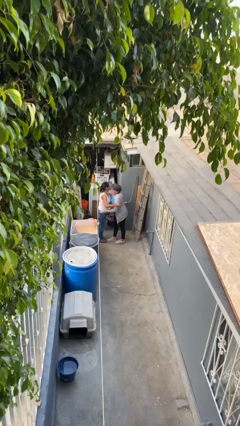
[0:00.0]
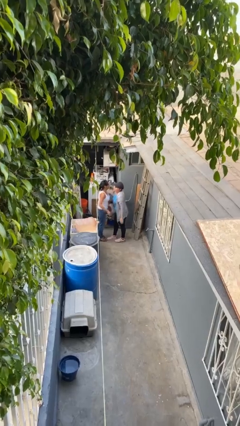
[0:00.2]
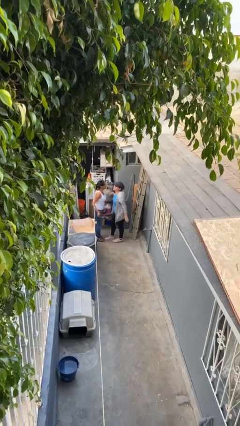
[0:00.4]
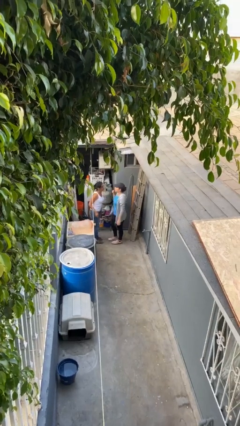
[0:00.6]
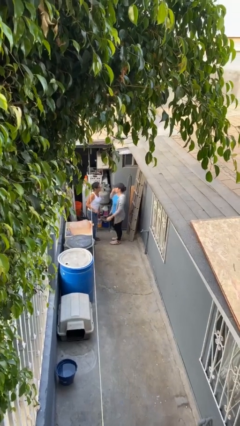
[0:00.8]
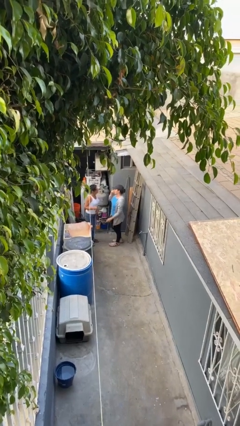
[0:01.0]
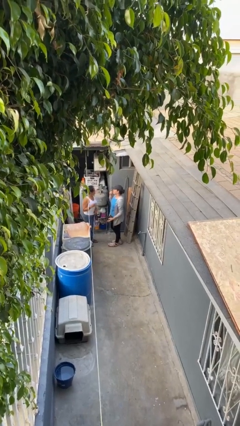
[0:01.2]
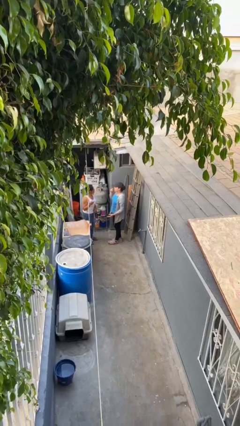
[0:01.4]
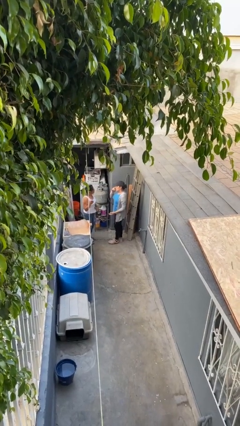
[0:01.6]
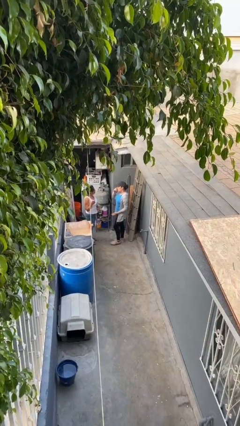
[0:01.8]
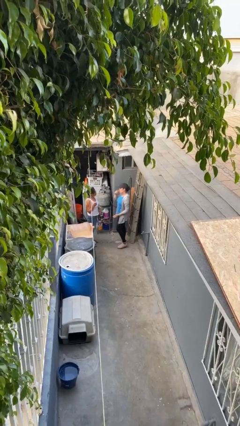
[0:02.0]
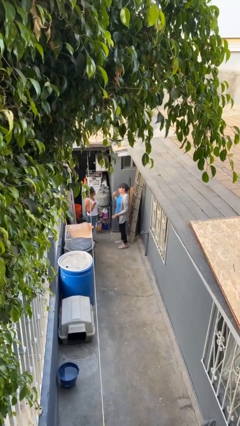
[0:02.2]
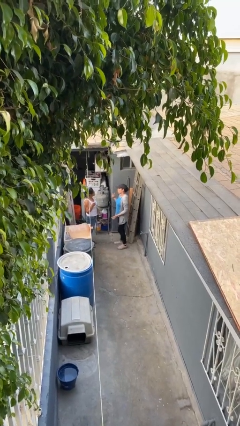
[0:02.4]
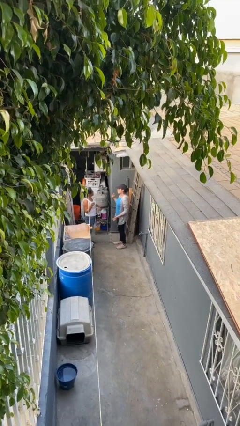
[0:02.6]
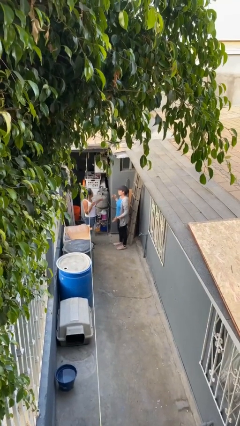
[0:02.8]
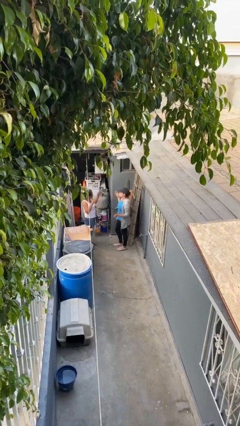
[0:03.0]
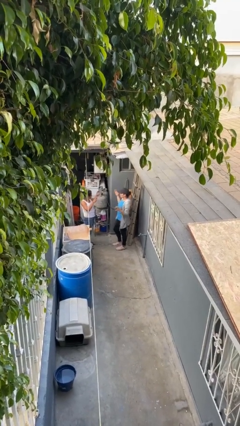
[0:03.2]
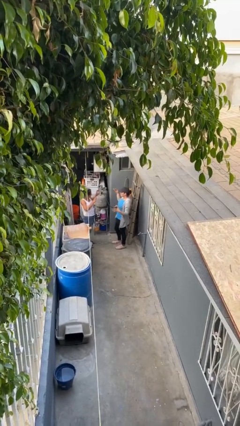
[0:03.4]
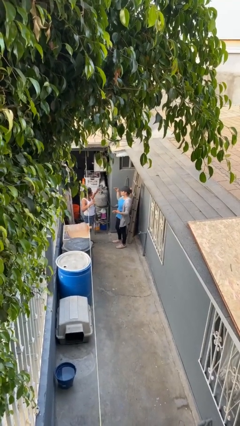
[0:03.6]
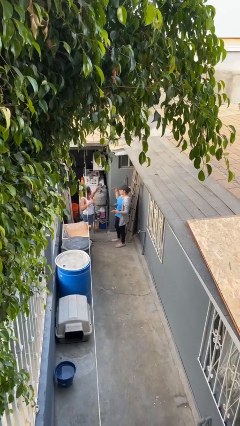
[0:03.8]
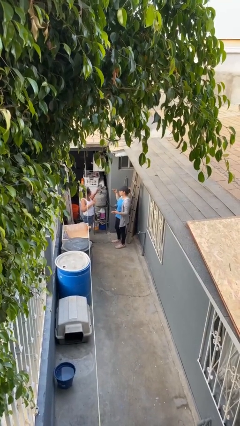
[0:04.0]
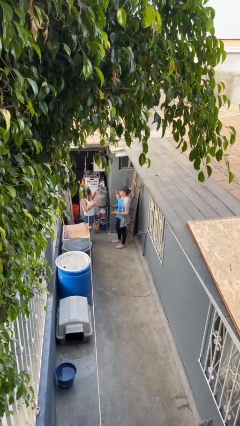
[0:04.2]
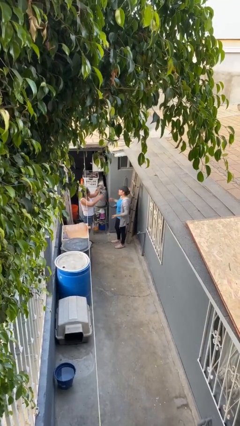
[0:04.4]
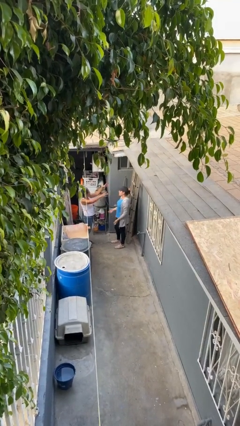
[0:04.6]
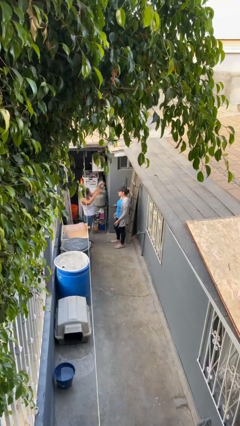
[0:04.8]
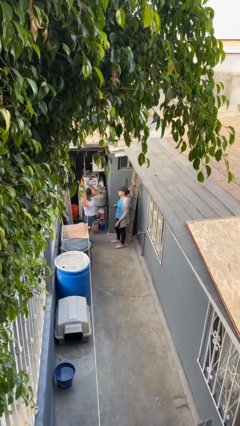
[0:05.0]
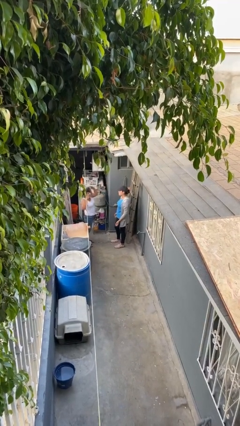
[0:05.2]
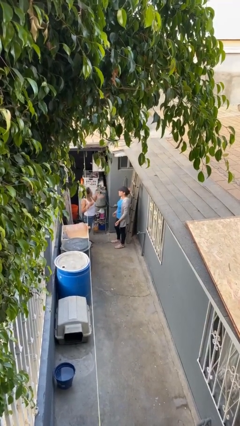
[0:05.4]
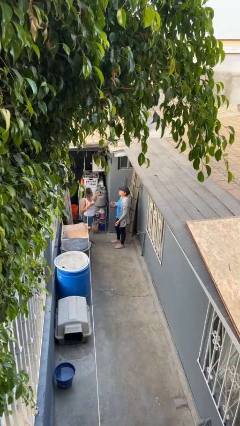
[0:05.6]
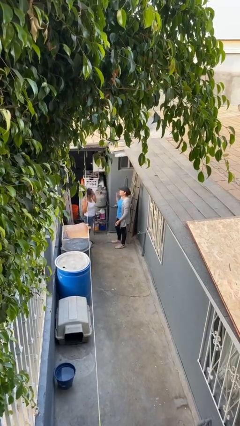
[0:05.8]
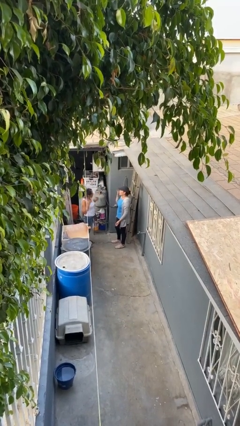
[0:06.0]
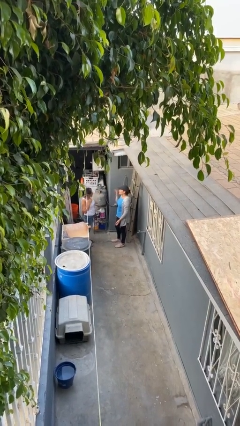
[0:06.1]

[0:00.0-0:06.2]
person talks to person

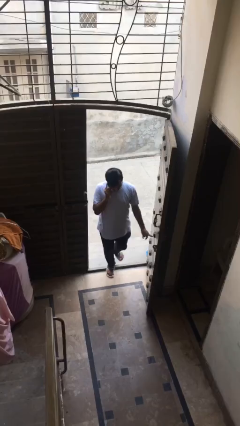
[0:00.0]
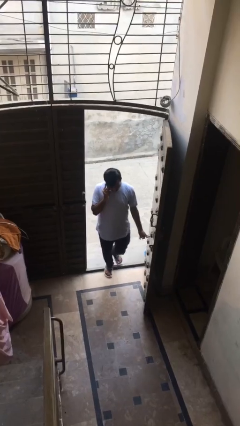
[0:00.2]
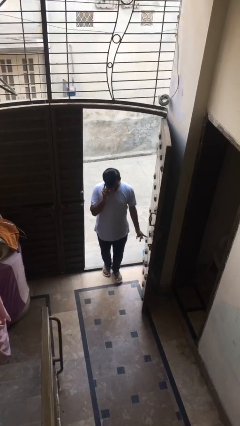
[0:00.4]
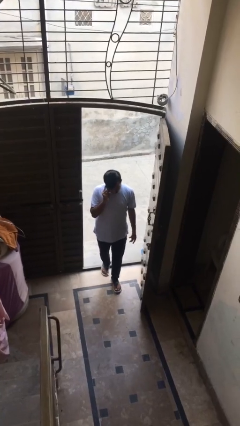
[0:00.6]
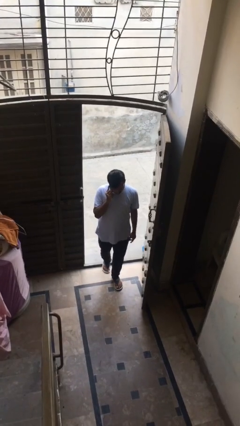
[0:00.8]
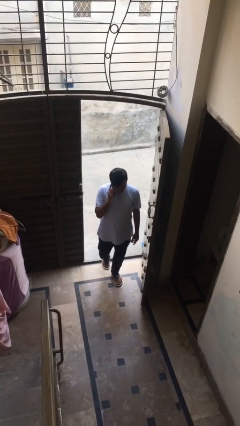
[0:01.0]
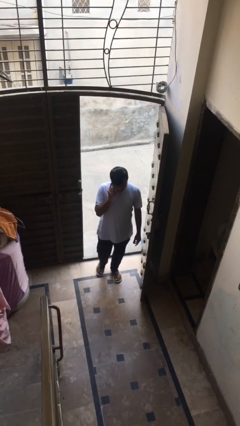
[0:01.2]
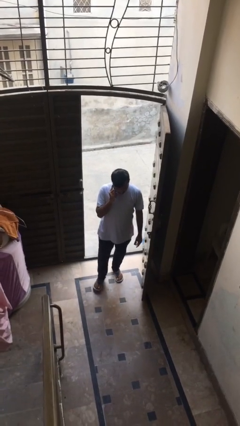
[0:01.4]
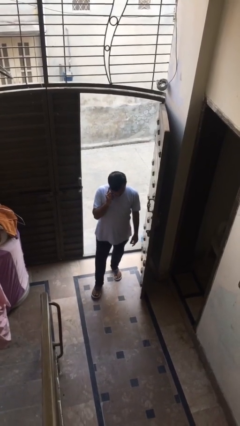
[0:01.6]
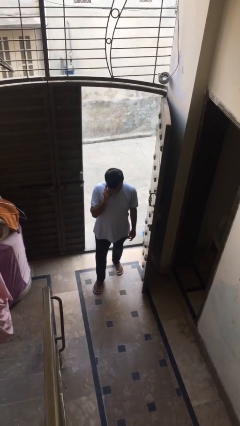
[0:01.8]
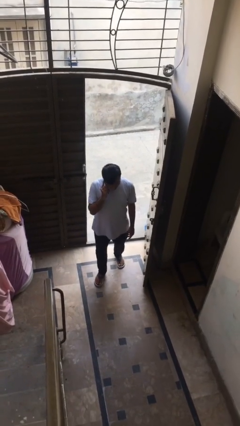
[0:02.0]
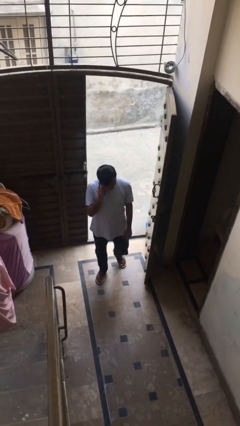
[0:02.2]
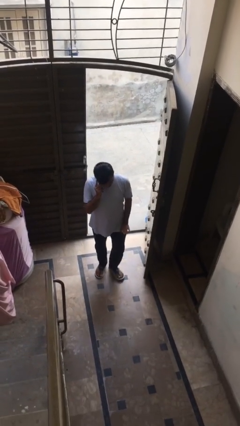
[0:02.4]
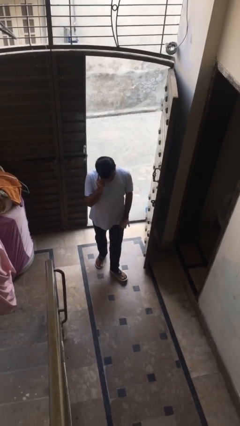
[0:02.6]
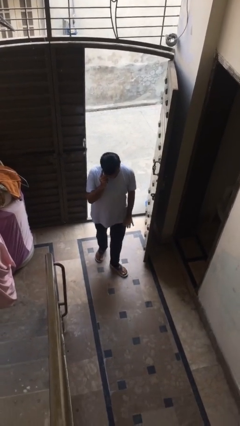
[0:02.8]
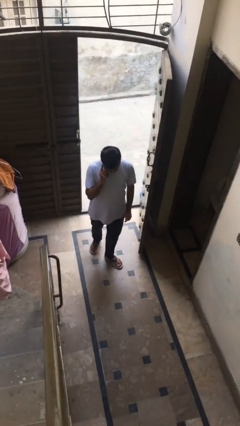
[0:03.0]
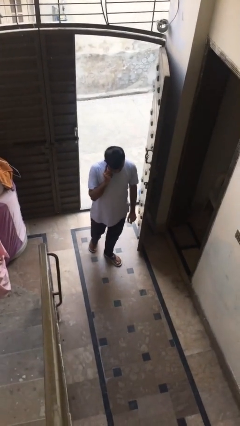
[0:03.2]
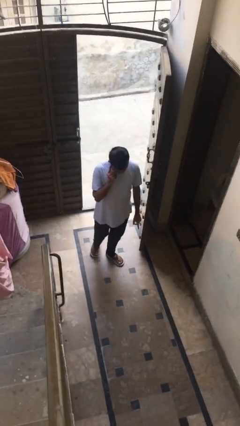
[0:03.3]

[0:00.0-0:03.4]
person enters scene through structure

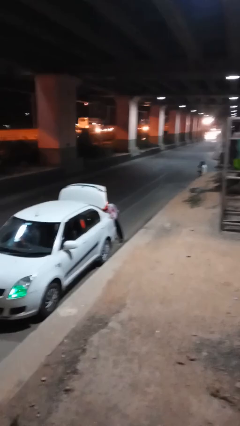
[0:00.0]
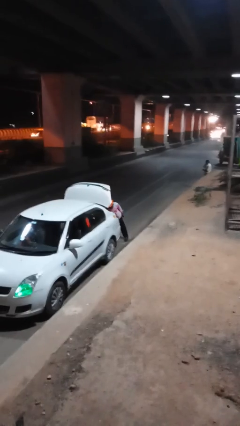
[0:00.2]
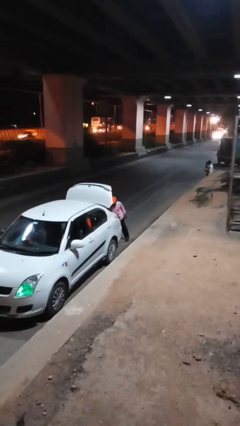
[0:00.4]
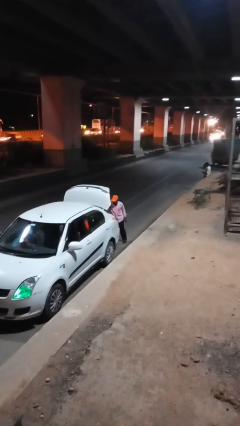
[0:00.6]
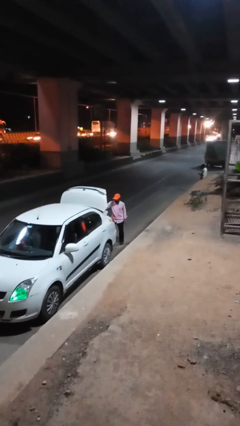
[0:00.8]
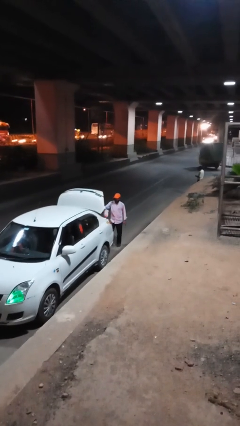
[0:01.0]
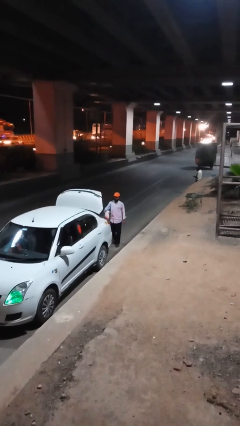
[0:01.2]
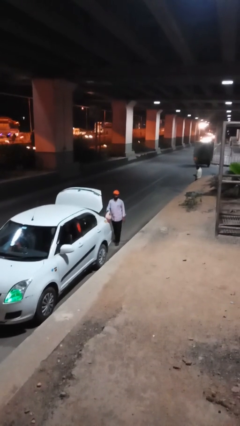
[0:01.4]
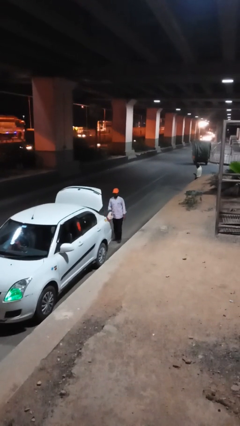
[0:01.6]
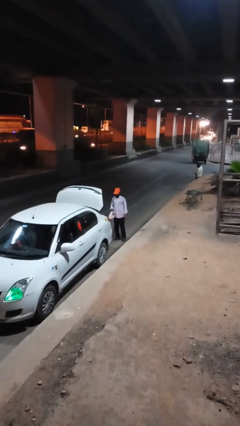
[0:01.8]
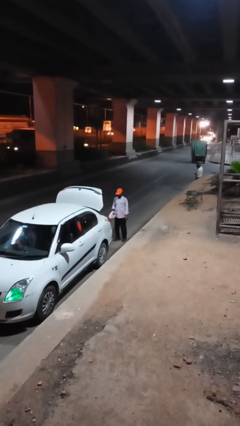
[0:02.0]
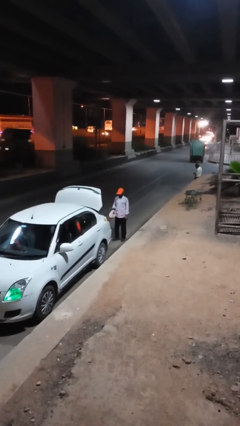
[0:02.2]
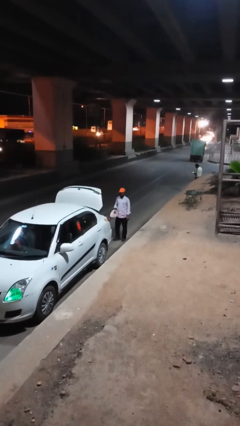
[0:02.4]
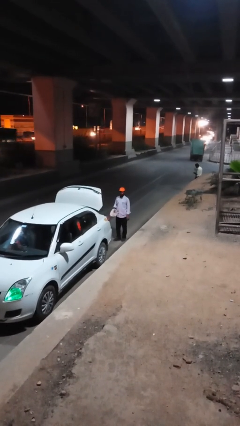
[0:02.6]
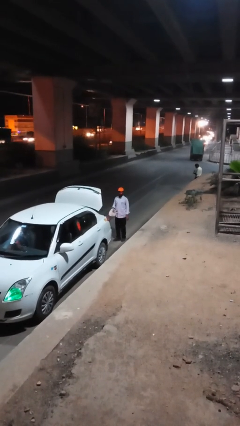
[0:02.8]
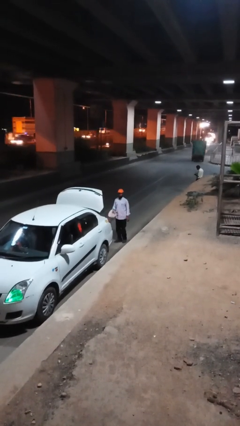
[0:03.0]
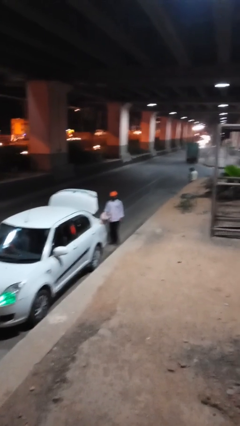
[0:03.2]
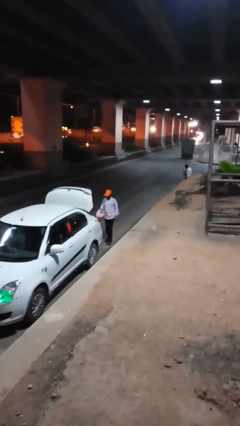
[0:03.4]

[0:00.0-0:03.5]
person unloads car

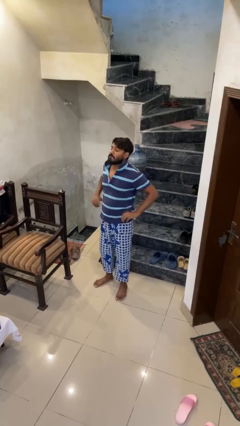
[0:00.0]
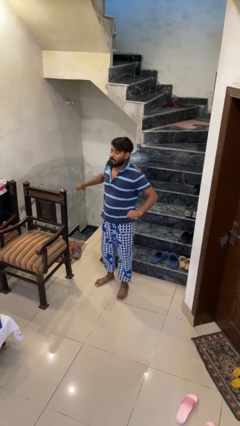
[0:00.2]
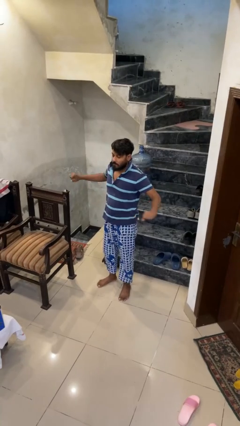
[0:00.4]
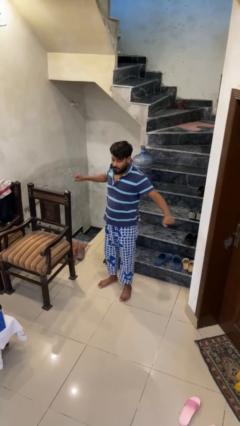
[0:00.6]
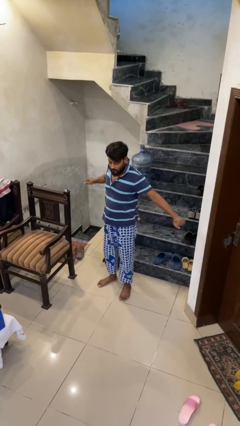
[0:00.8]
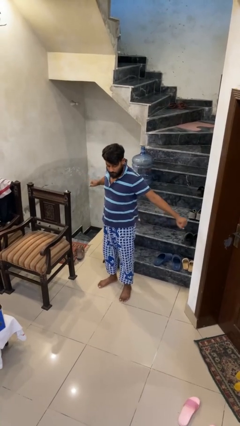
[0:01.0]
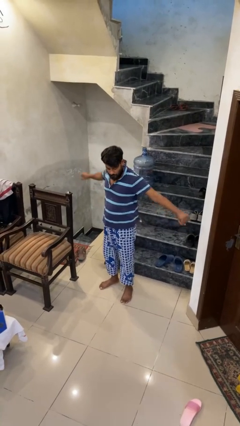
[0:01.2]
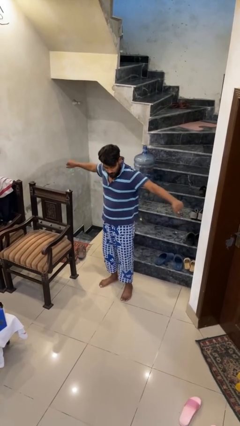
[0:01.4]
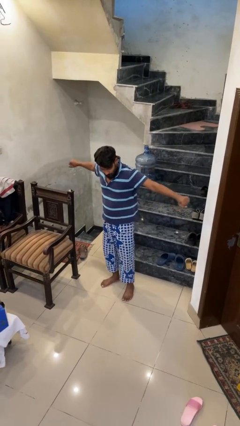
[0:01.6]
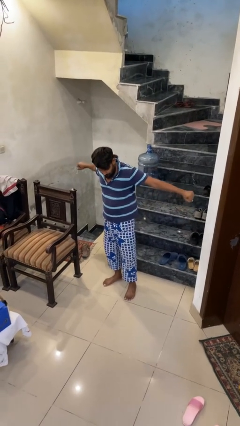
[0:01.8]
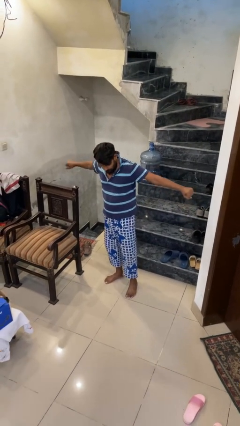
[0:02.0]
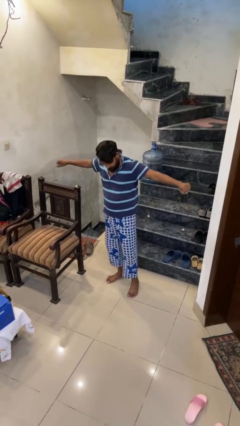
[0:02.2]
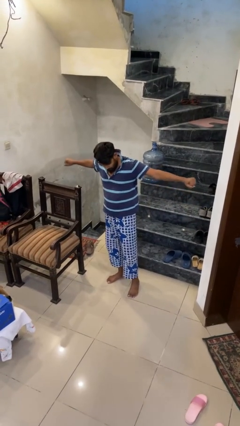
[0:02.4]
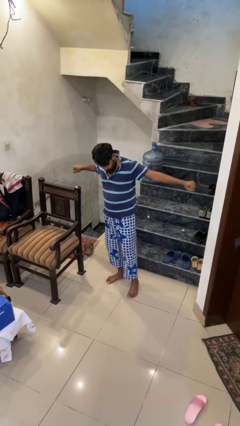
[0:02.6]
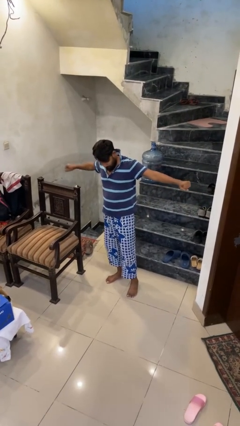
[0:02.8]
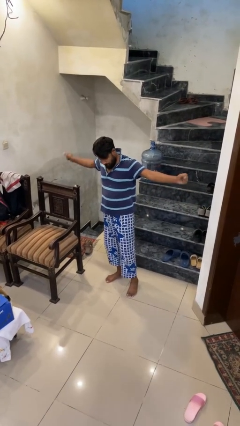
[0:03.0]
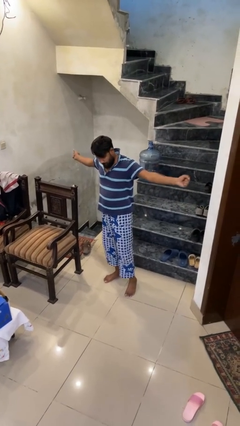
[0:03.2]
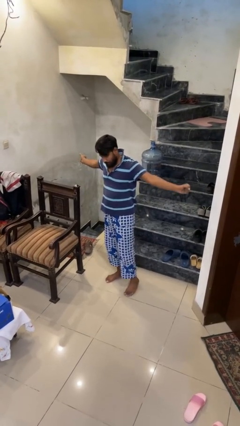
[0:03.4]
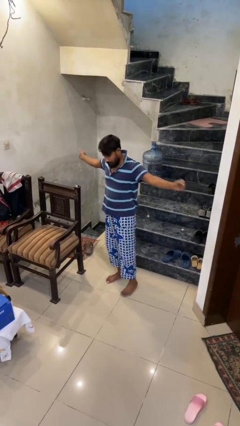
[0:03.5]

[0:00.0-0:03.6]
person stretches arms to side

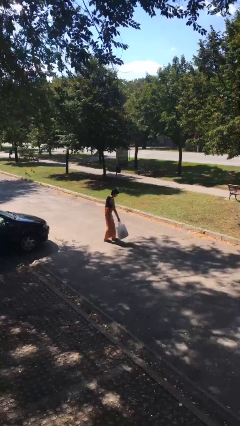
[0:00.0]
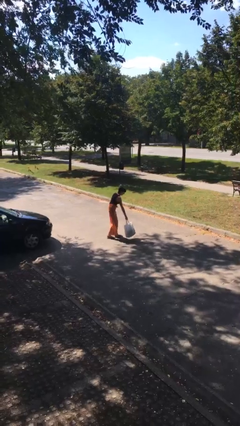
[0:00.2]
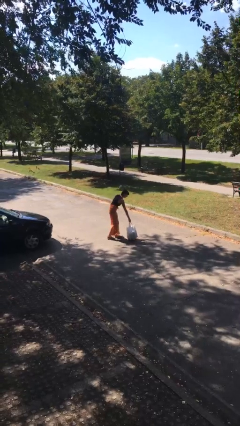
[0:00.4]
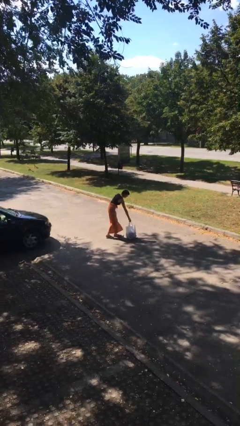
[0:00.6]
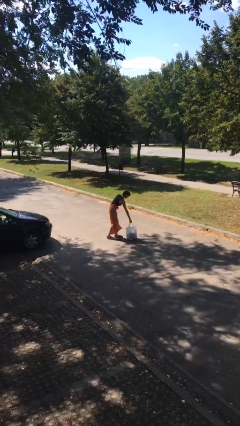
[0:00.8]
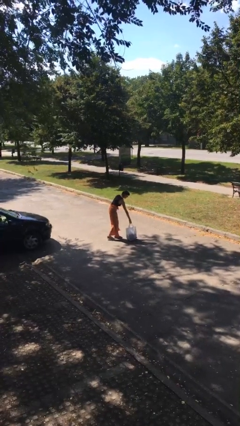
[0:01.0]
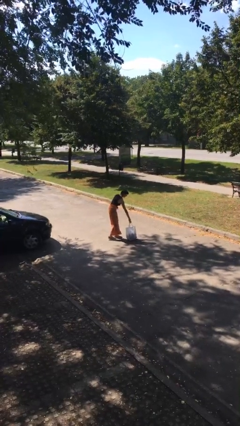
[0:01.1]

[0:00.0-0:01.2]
person puts down object on floor
